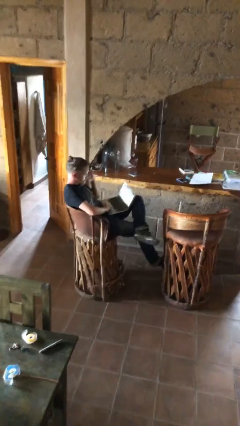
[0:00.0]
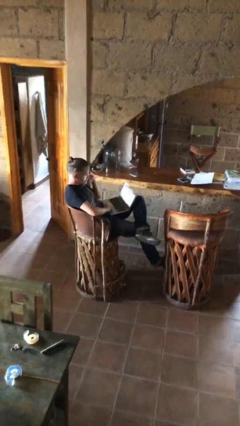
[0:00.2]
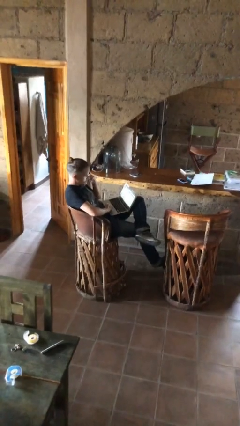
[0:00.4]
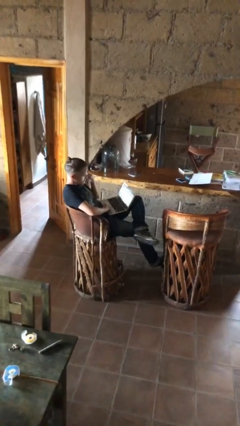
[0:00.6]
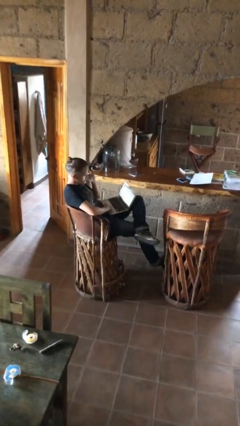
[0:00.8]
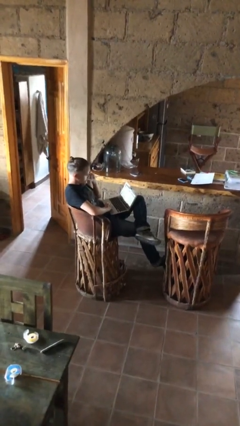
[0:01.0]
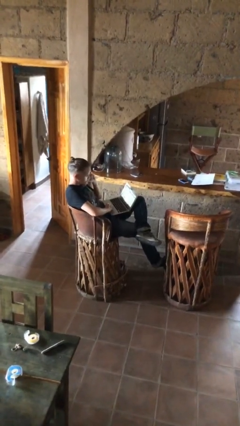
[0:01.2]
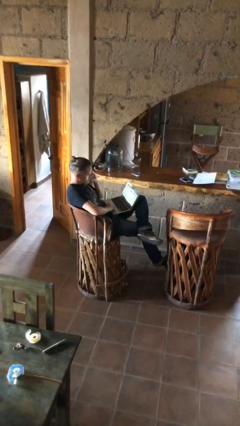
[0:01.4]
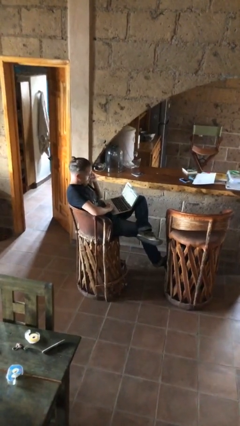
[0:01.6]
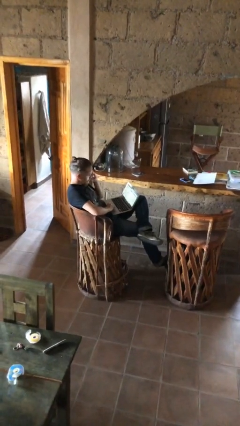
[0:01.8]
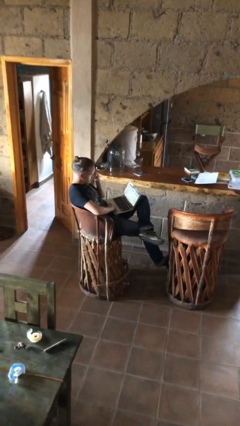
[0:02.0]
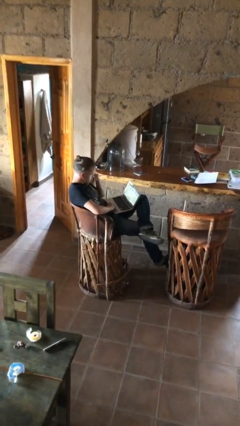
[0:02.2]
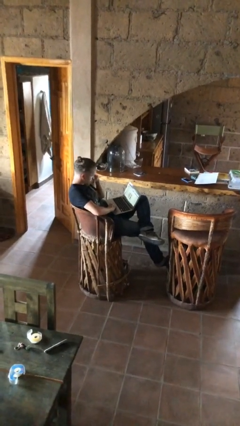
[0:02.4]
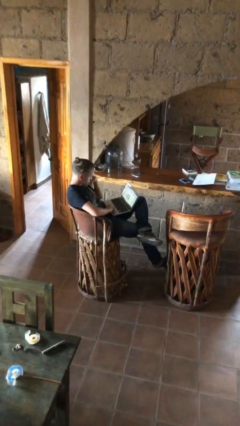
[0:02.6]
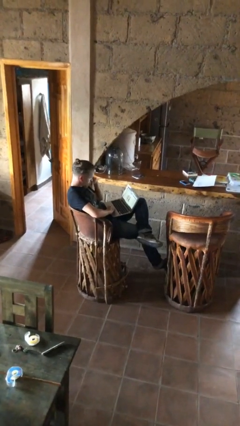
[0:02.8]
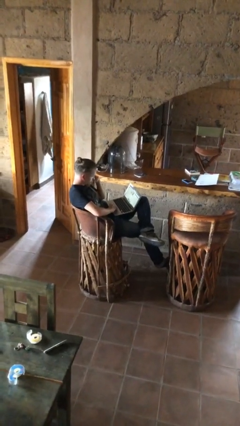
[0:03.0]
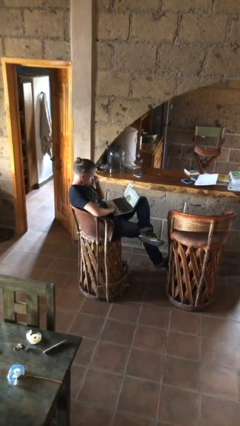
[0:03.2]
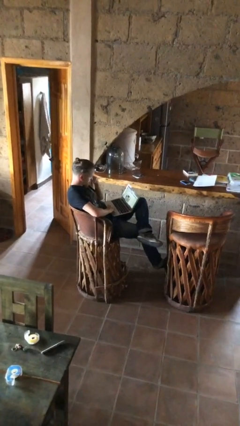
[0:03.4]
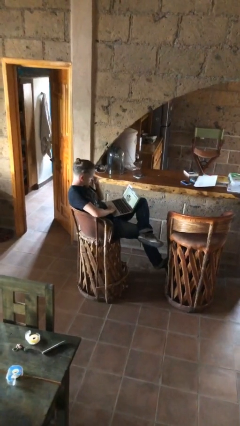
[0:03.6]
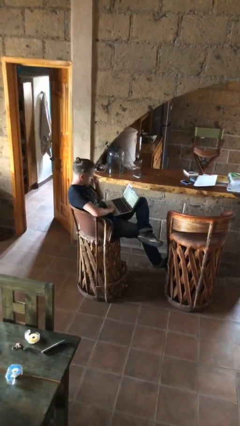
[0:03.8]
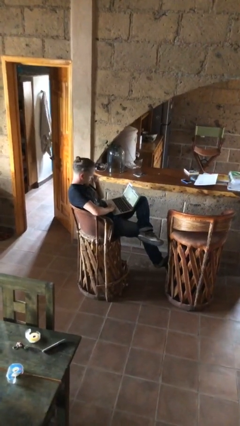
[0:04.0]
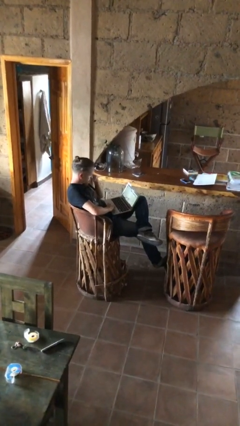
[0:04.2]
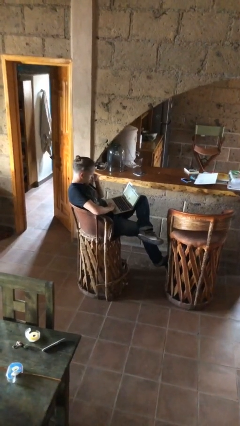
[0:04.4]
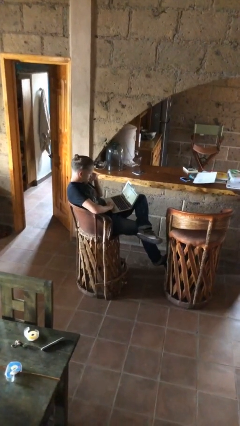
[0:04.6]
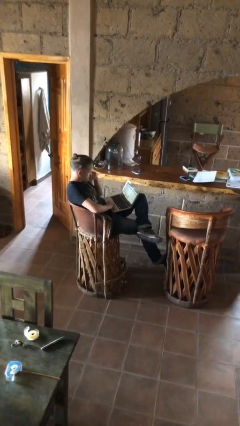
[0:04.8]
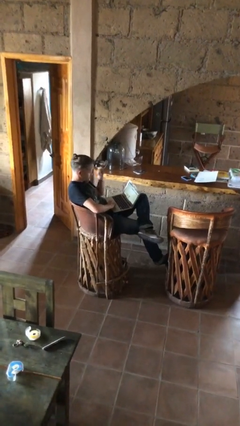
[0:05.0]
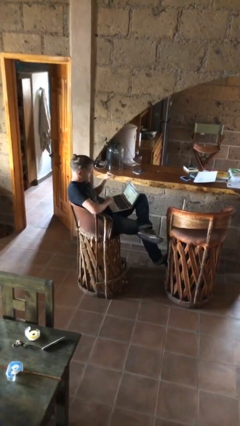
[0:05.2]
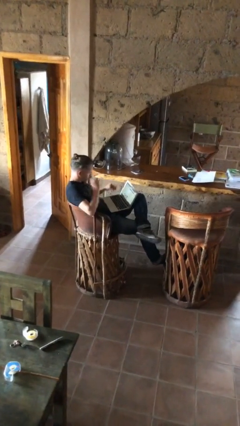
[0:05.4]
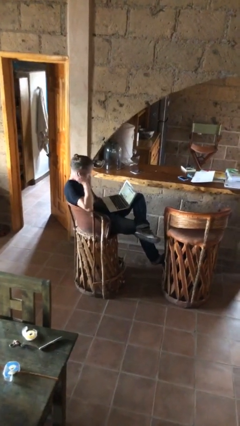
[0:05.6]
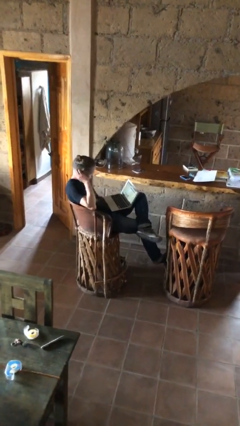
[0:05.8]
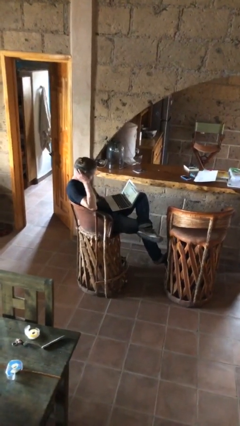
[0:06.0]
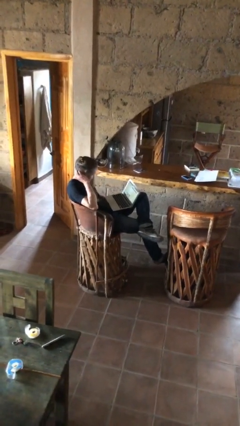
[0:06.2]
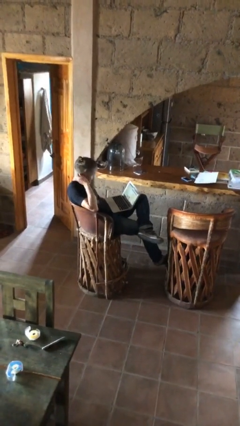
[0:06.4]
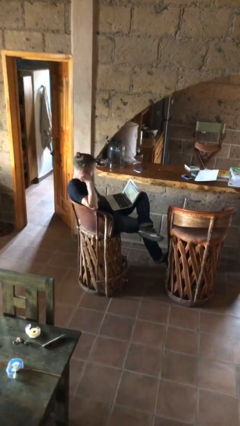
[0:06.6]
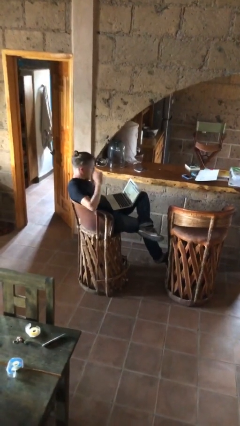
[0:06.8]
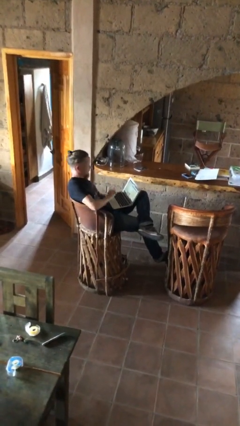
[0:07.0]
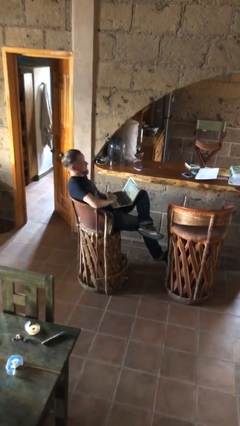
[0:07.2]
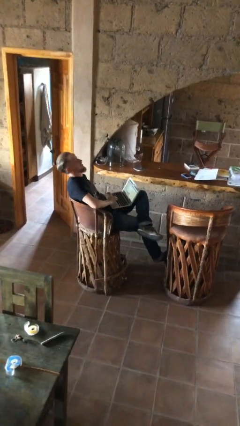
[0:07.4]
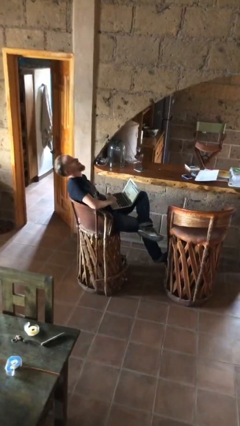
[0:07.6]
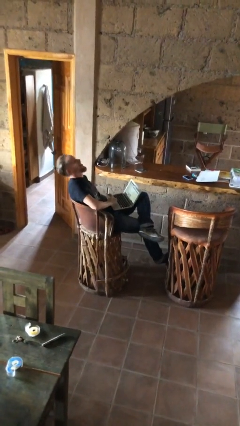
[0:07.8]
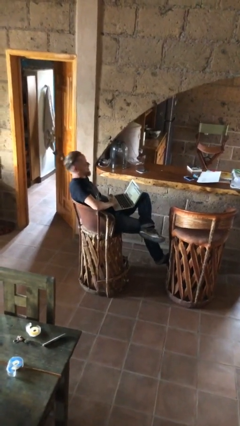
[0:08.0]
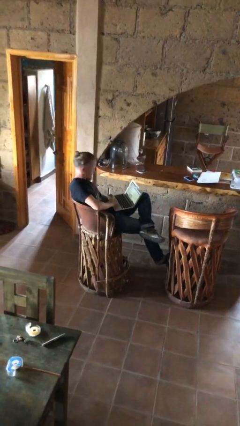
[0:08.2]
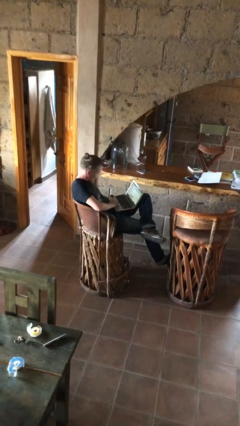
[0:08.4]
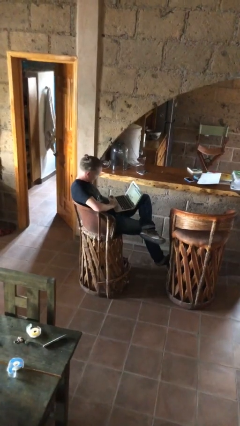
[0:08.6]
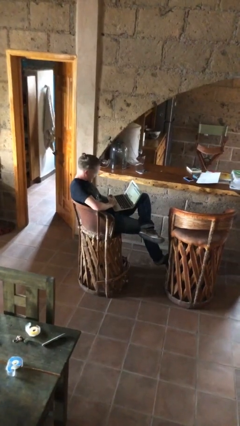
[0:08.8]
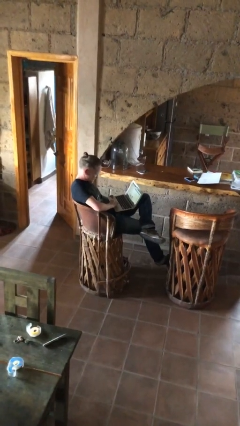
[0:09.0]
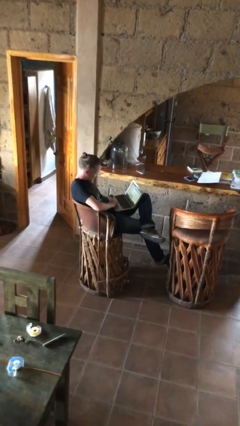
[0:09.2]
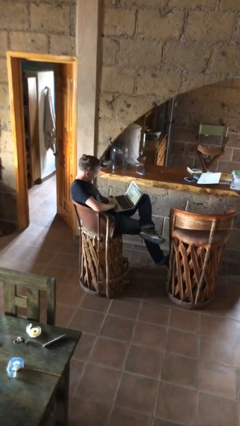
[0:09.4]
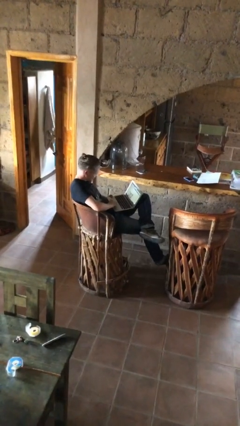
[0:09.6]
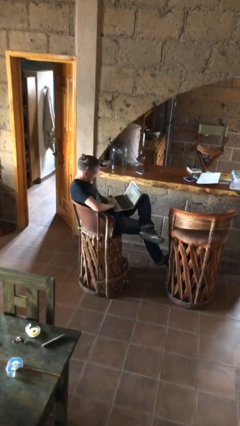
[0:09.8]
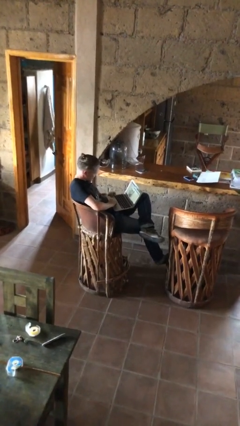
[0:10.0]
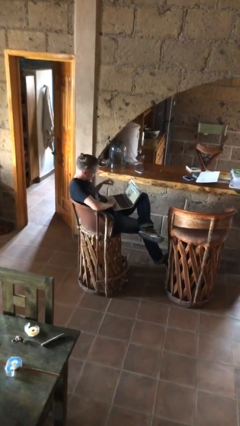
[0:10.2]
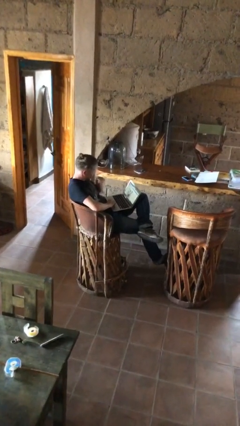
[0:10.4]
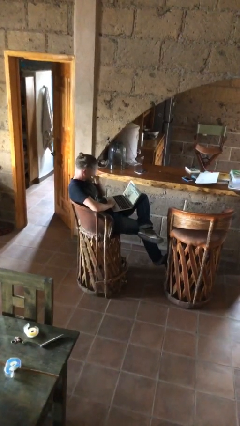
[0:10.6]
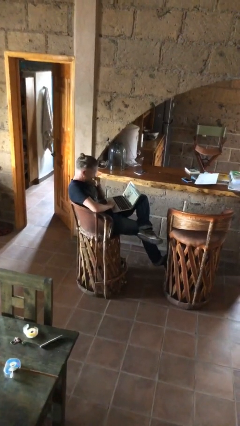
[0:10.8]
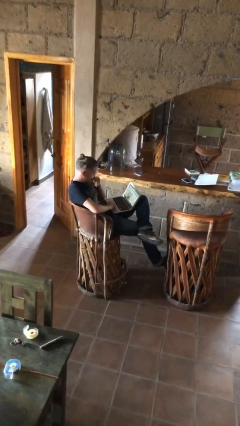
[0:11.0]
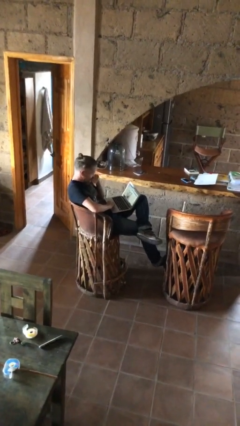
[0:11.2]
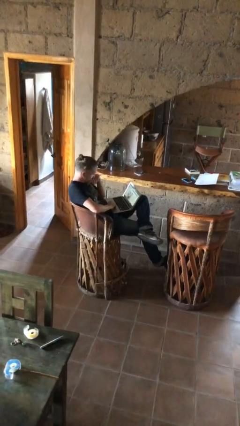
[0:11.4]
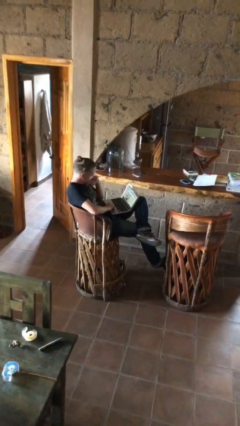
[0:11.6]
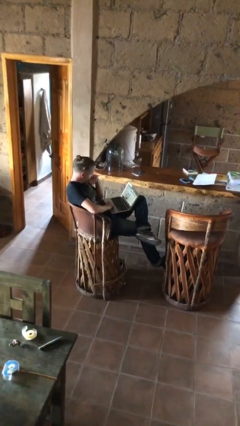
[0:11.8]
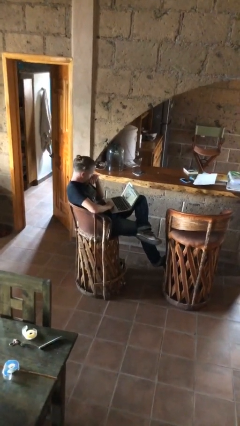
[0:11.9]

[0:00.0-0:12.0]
person interacts with laptop

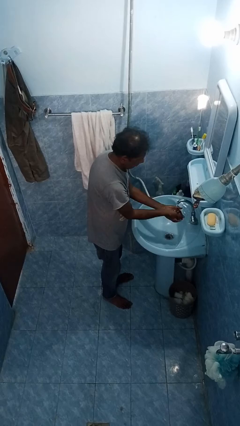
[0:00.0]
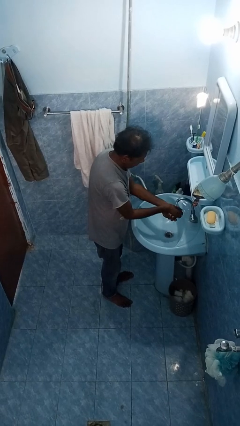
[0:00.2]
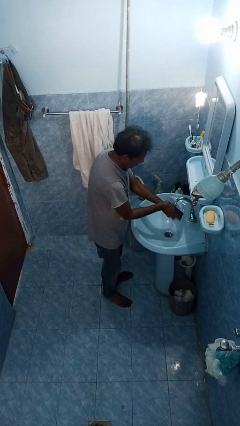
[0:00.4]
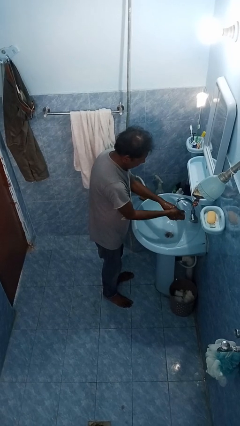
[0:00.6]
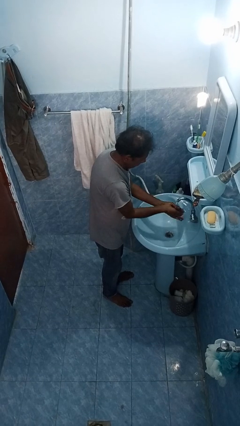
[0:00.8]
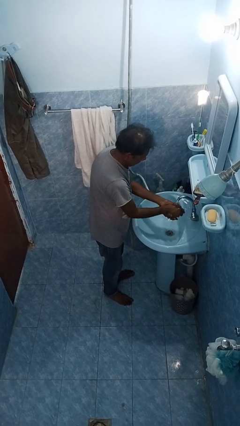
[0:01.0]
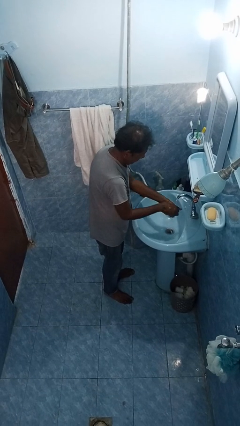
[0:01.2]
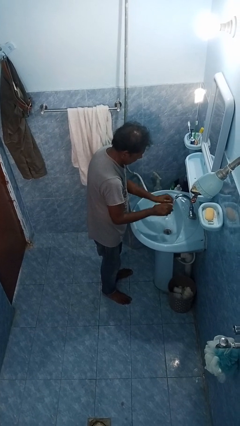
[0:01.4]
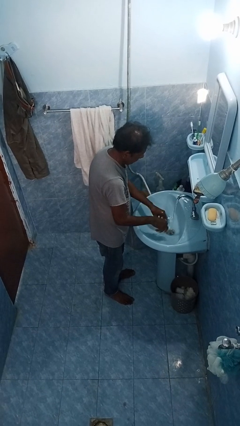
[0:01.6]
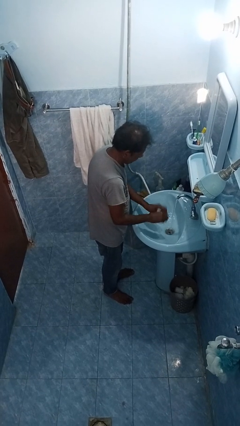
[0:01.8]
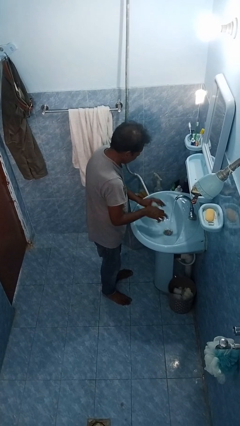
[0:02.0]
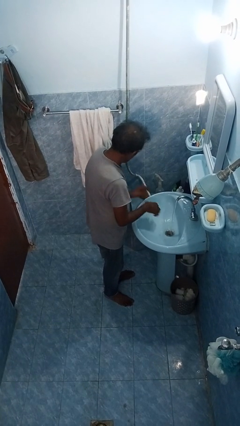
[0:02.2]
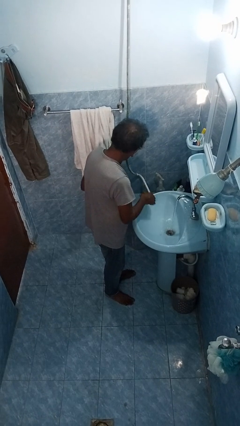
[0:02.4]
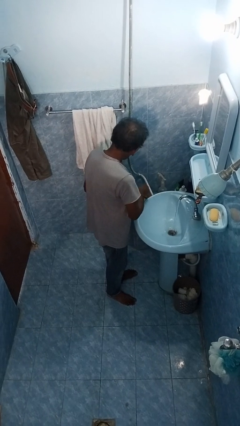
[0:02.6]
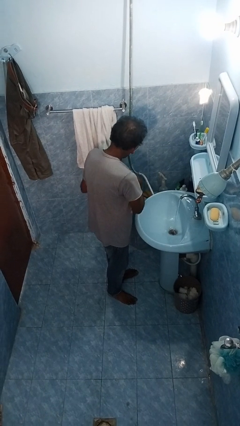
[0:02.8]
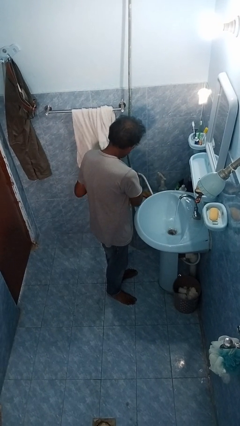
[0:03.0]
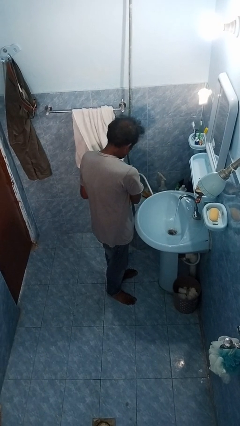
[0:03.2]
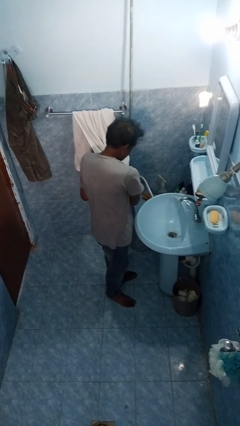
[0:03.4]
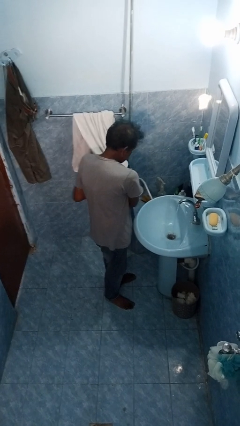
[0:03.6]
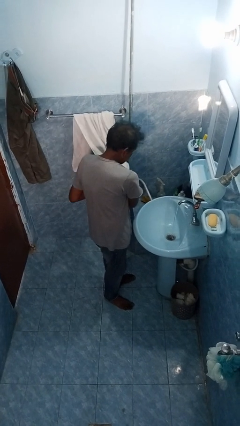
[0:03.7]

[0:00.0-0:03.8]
person washes hands

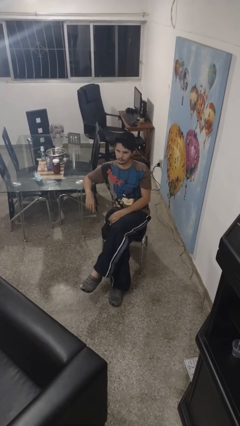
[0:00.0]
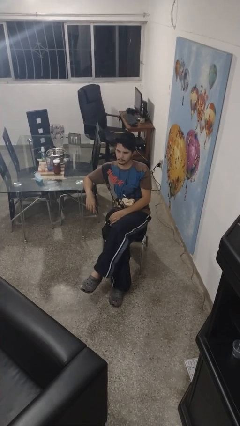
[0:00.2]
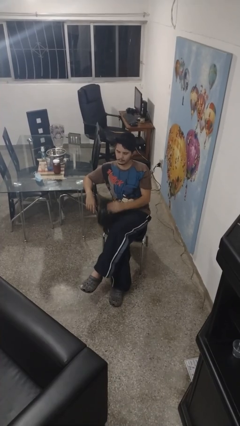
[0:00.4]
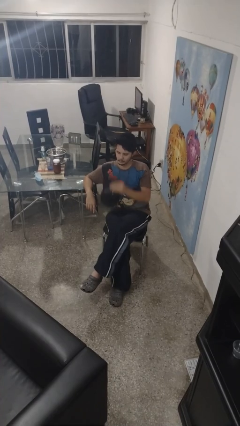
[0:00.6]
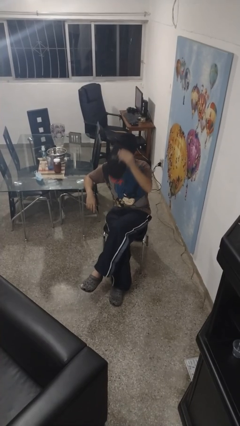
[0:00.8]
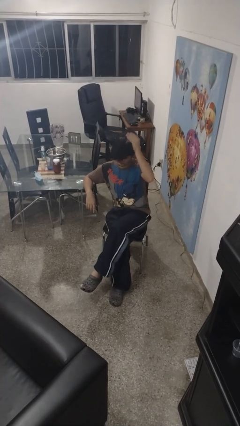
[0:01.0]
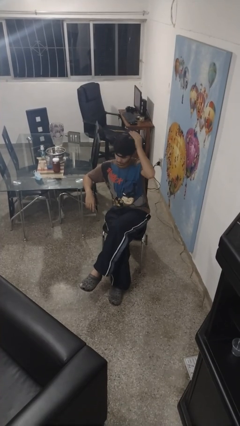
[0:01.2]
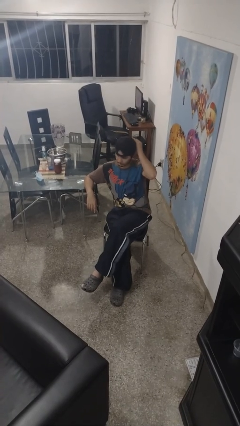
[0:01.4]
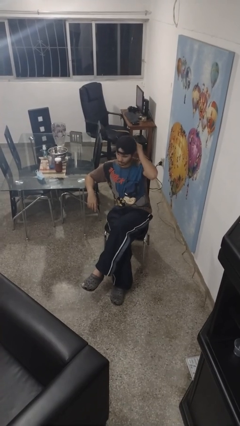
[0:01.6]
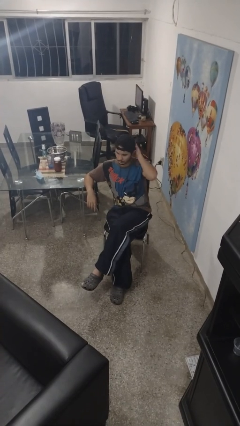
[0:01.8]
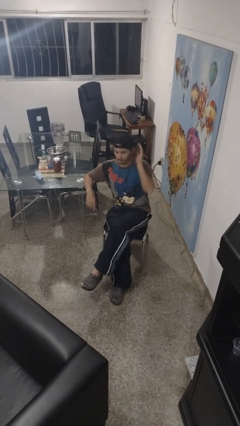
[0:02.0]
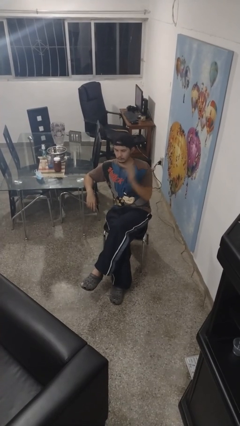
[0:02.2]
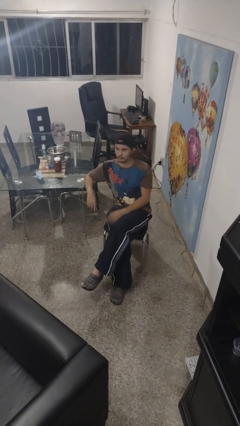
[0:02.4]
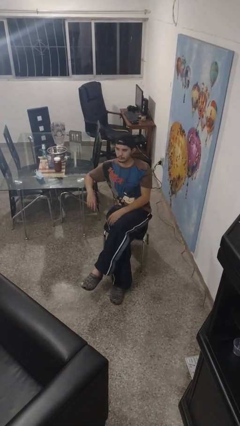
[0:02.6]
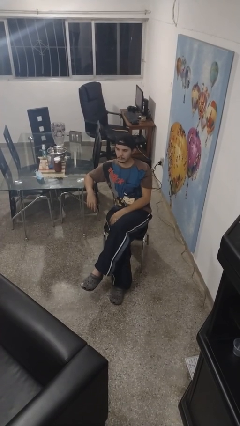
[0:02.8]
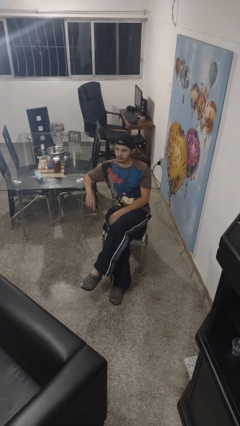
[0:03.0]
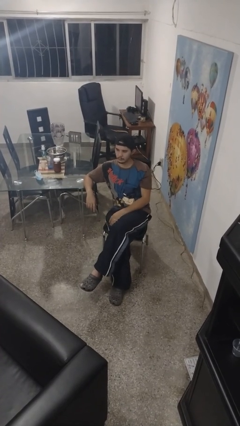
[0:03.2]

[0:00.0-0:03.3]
person puts on hat
